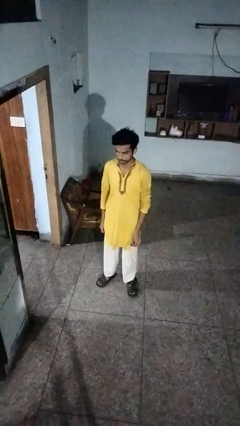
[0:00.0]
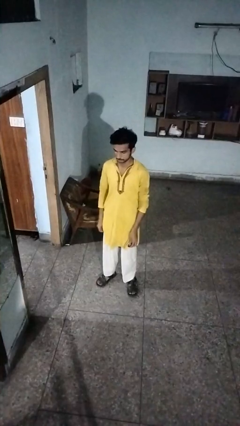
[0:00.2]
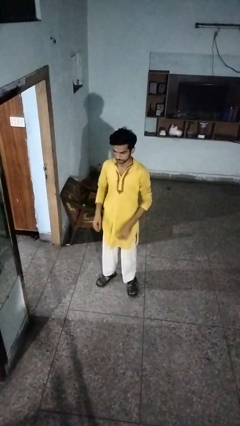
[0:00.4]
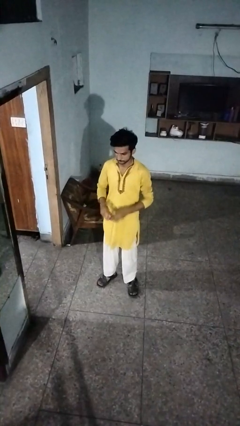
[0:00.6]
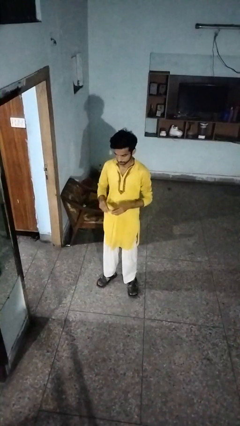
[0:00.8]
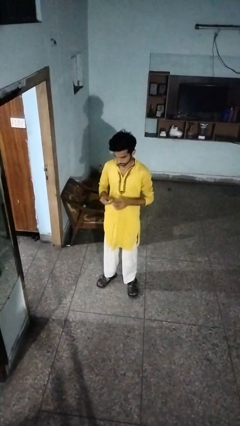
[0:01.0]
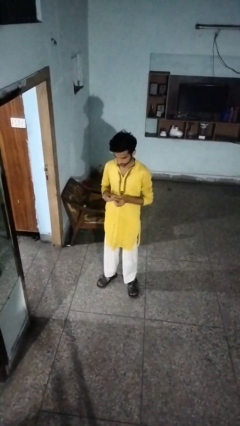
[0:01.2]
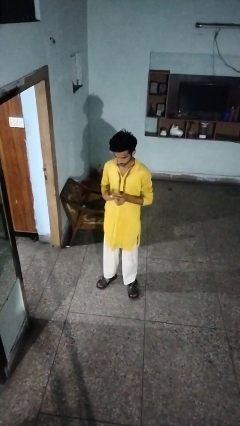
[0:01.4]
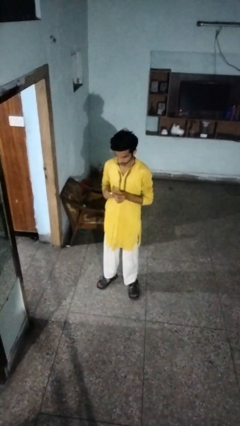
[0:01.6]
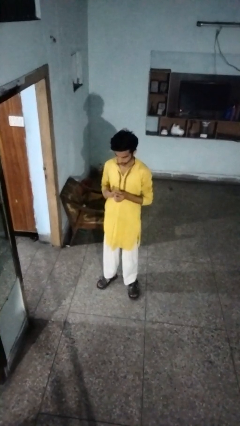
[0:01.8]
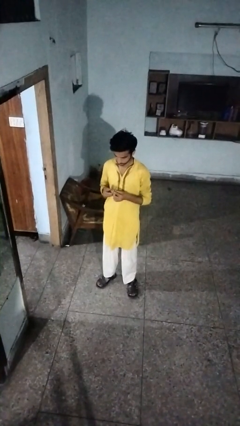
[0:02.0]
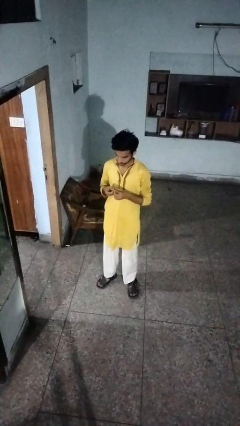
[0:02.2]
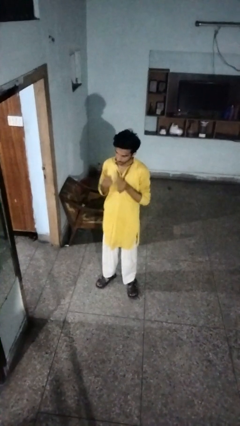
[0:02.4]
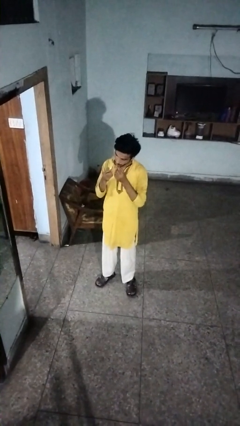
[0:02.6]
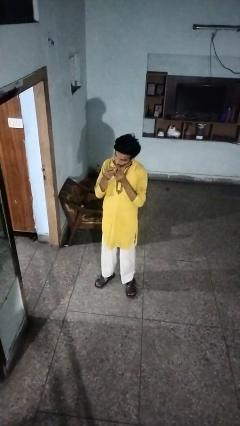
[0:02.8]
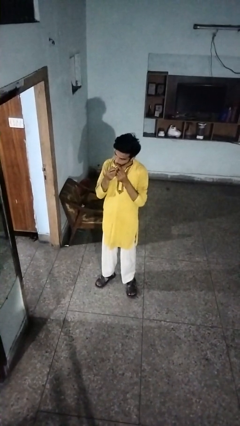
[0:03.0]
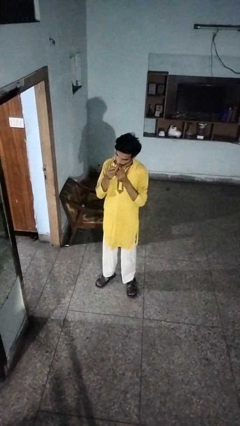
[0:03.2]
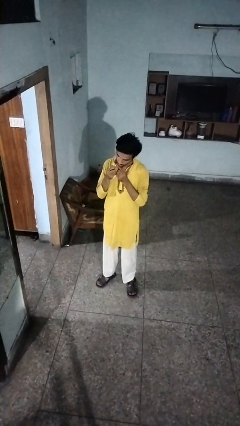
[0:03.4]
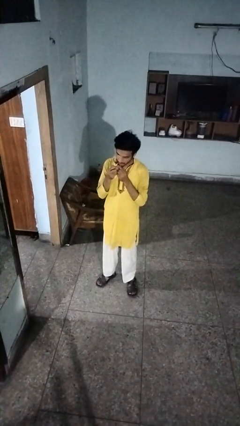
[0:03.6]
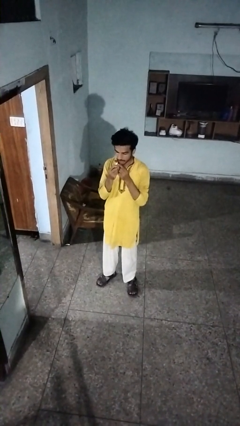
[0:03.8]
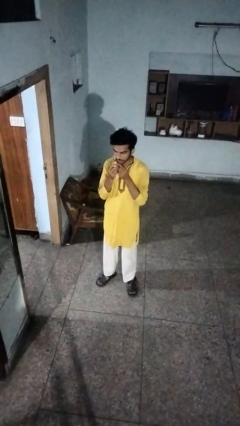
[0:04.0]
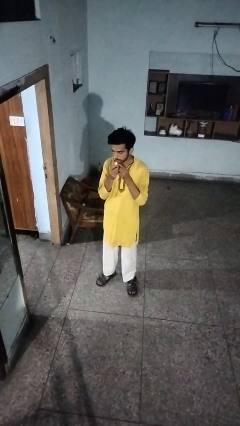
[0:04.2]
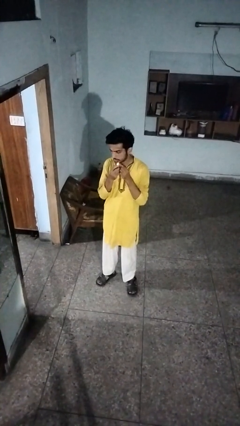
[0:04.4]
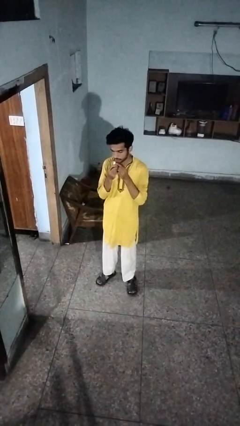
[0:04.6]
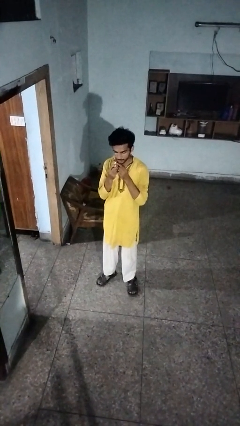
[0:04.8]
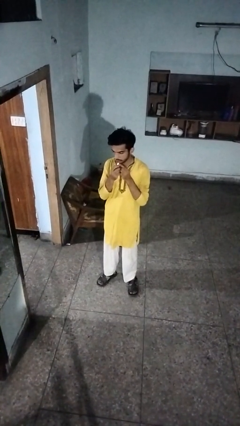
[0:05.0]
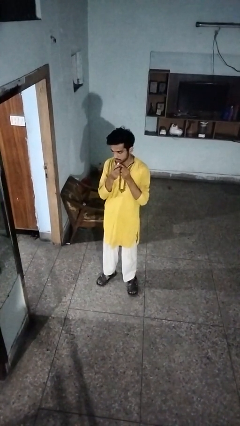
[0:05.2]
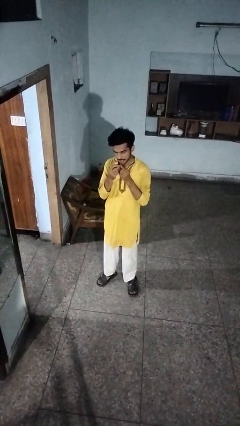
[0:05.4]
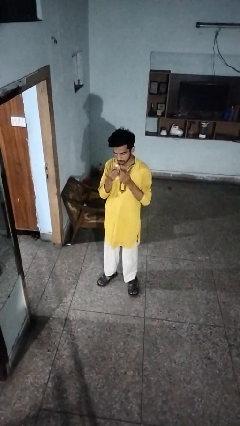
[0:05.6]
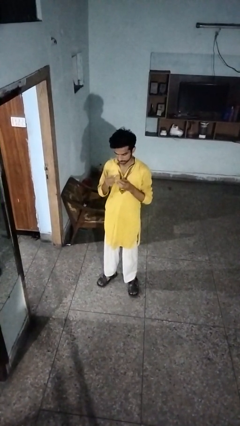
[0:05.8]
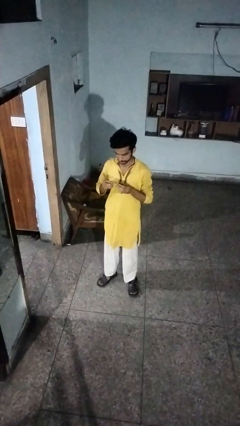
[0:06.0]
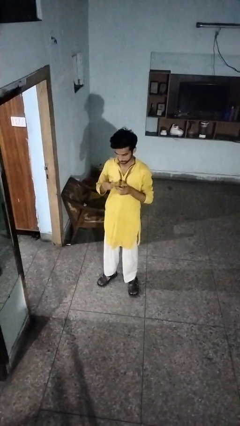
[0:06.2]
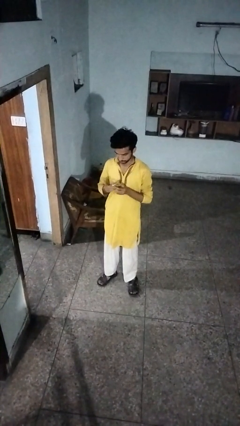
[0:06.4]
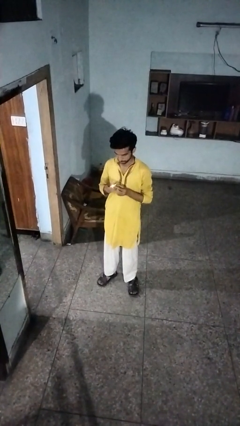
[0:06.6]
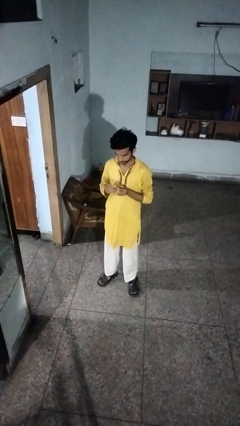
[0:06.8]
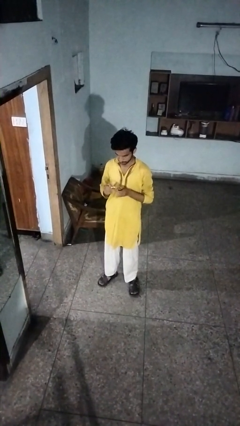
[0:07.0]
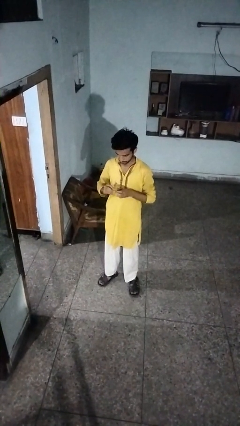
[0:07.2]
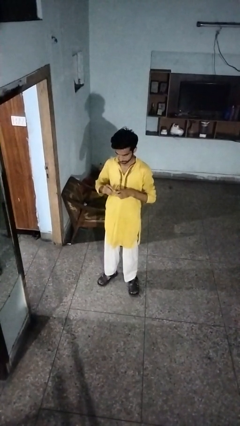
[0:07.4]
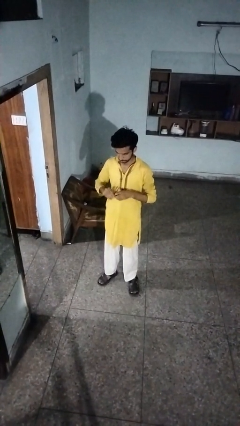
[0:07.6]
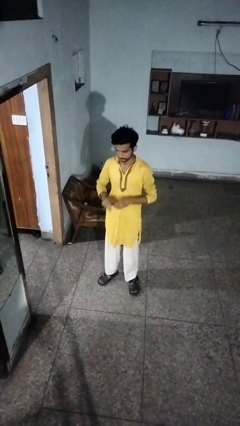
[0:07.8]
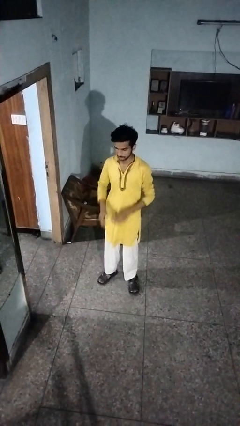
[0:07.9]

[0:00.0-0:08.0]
person applies lip makeup

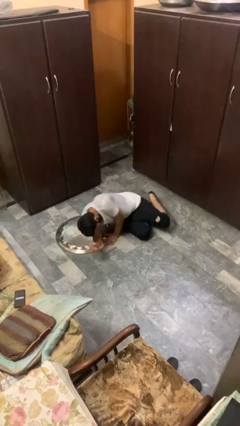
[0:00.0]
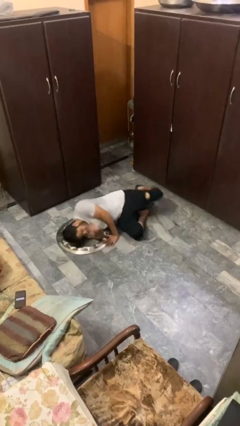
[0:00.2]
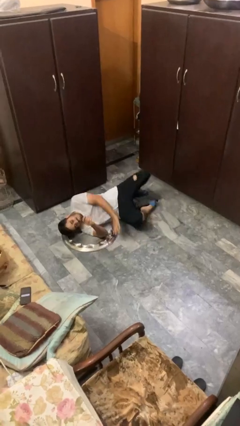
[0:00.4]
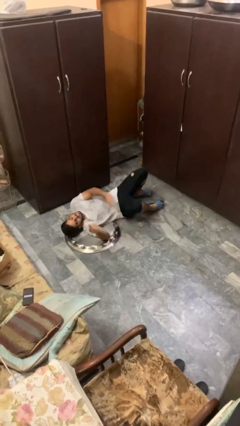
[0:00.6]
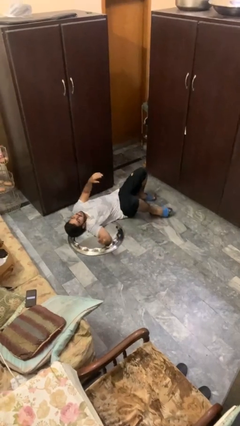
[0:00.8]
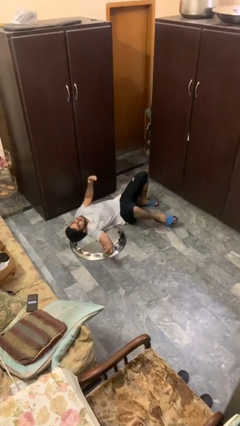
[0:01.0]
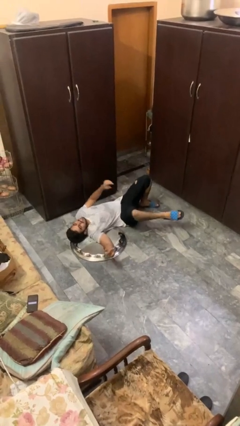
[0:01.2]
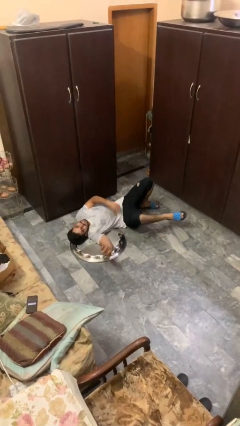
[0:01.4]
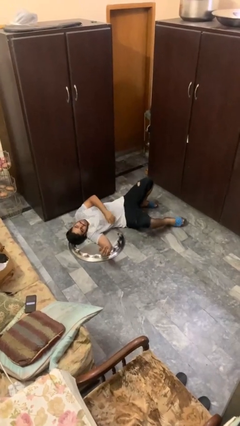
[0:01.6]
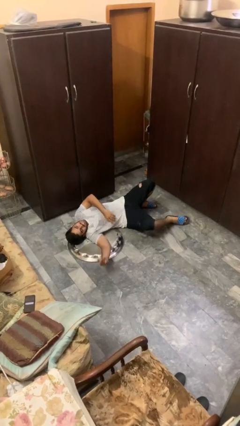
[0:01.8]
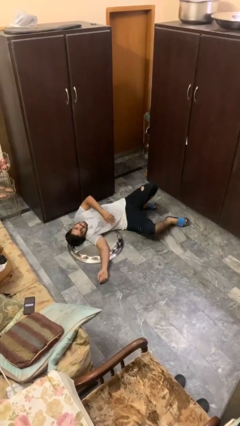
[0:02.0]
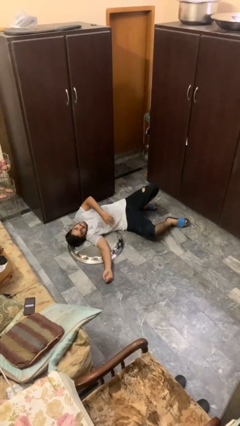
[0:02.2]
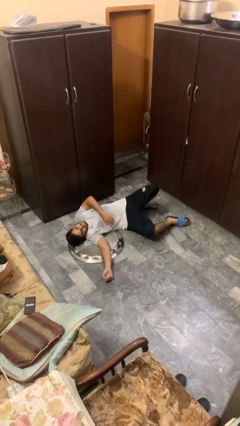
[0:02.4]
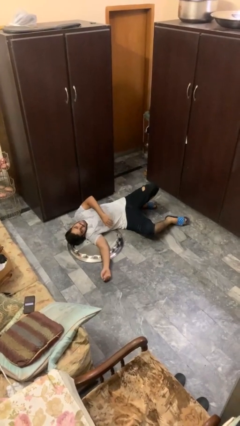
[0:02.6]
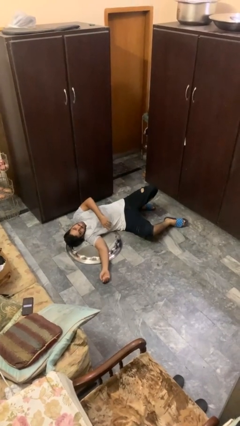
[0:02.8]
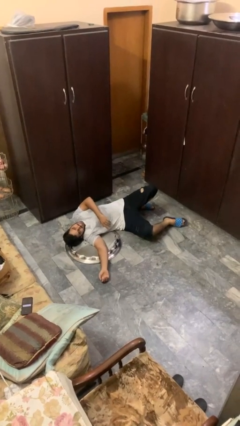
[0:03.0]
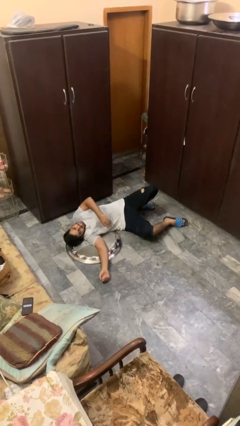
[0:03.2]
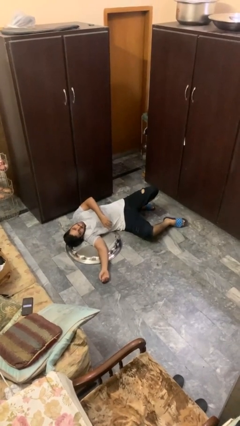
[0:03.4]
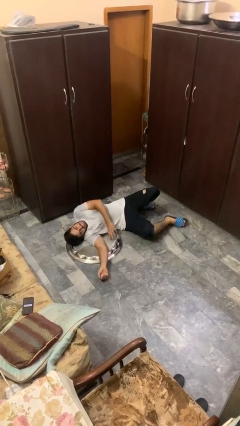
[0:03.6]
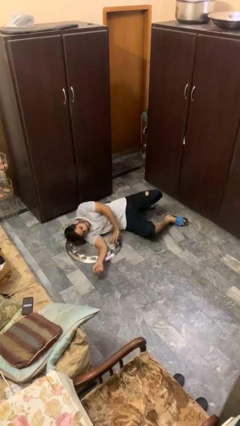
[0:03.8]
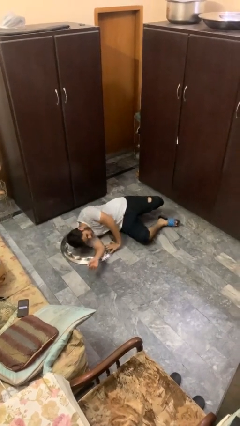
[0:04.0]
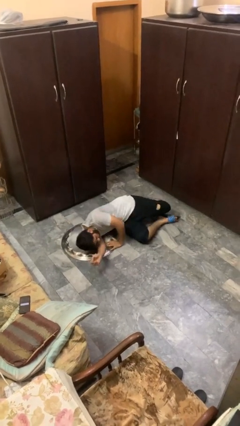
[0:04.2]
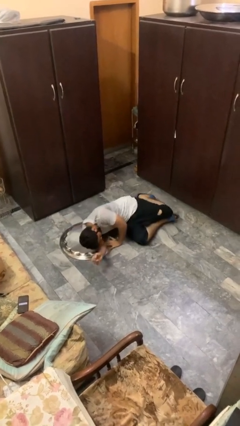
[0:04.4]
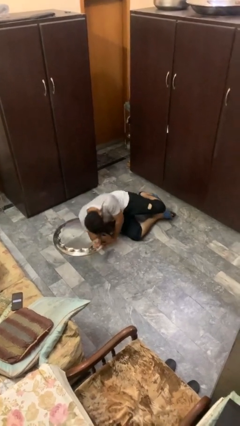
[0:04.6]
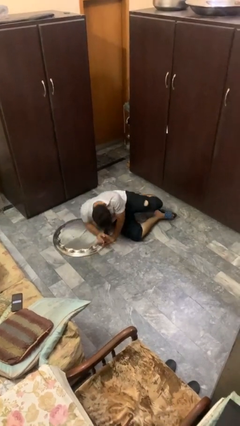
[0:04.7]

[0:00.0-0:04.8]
person lies down on floor

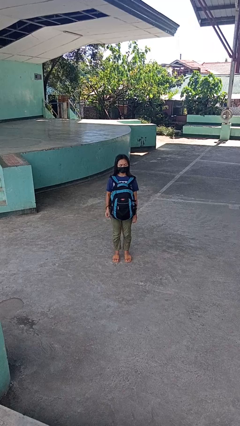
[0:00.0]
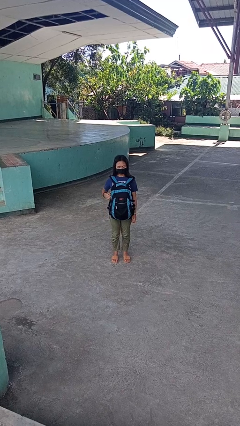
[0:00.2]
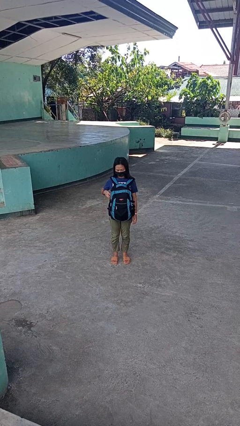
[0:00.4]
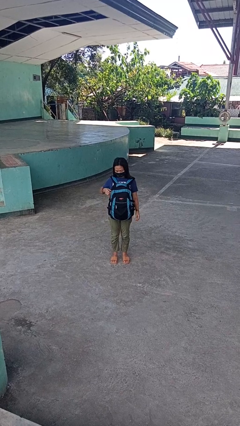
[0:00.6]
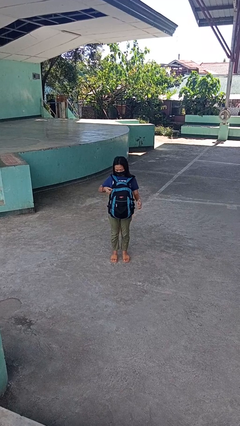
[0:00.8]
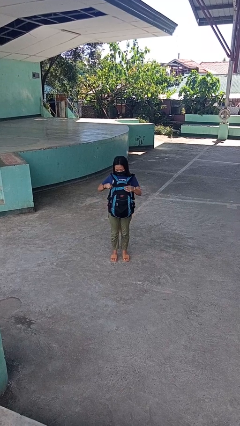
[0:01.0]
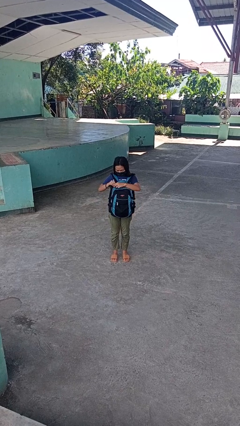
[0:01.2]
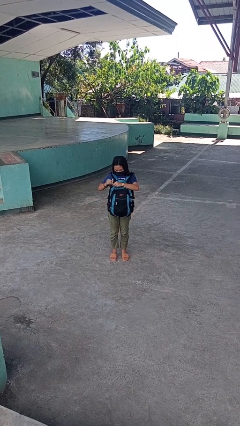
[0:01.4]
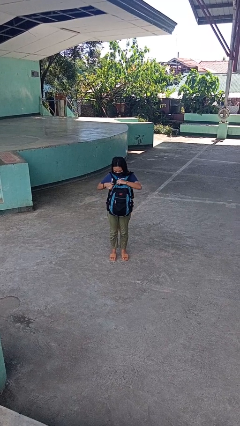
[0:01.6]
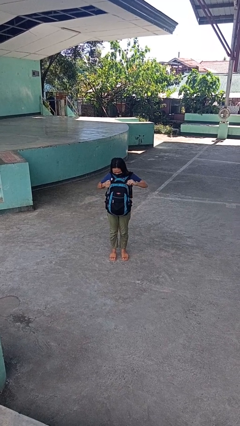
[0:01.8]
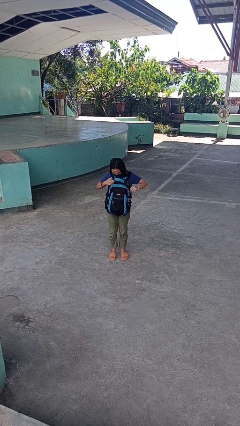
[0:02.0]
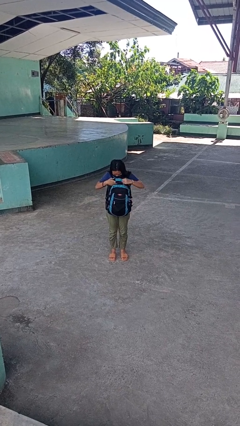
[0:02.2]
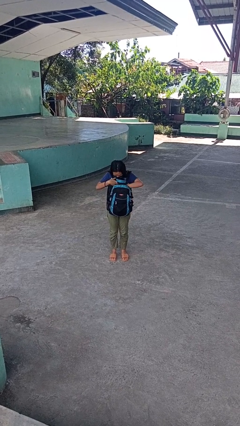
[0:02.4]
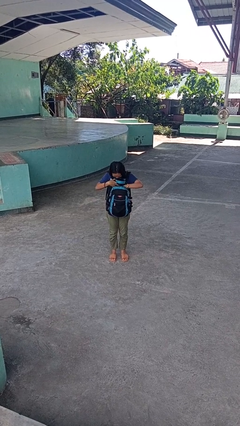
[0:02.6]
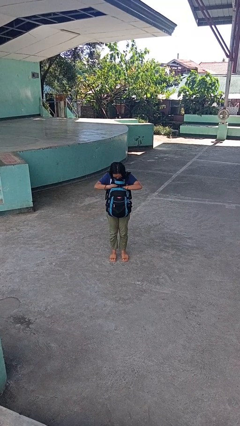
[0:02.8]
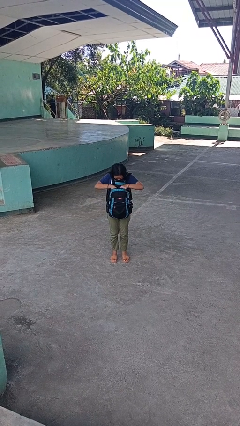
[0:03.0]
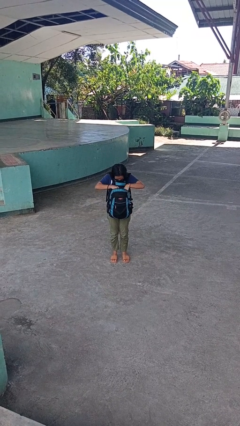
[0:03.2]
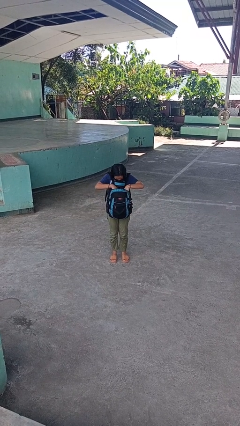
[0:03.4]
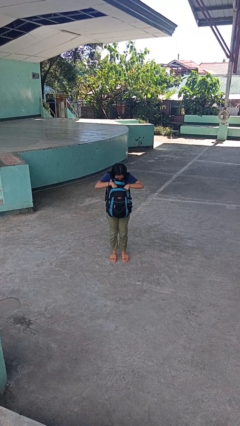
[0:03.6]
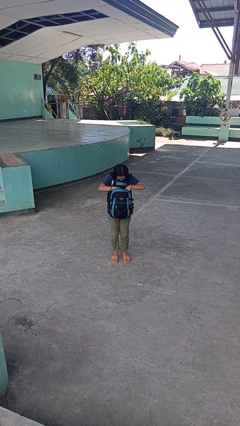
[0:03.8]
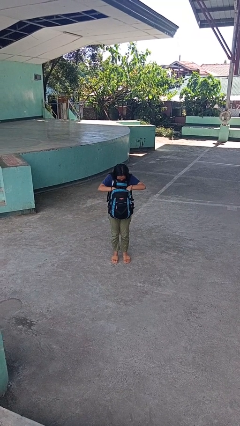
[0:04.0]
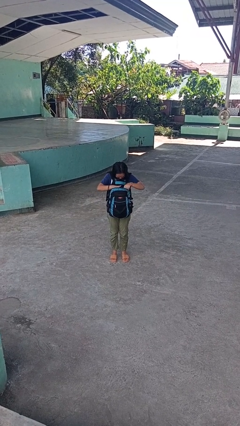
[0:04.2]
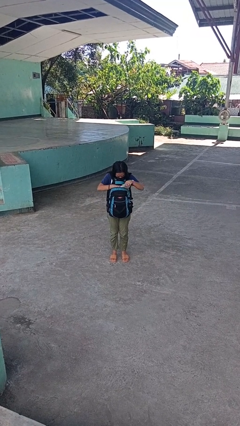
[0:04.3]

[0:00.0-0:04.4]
person searches in backpack

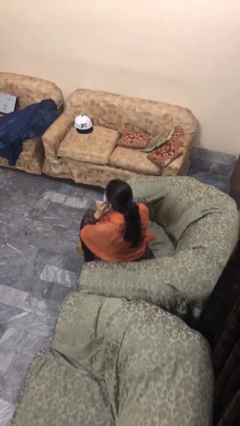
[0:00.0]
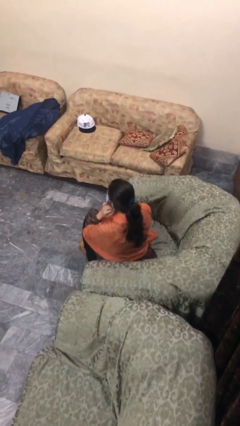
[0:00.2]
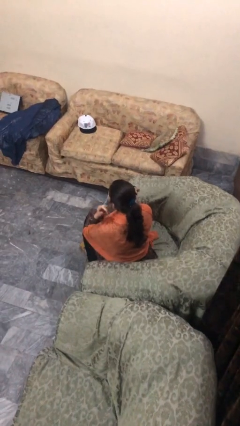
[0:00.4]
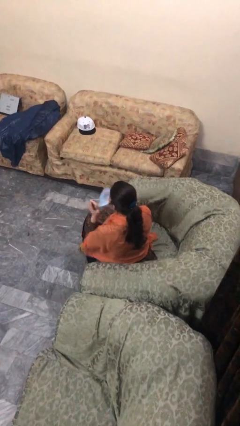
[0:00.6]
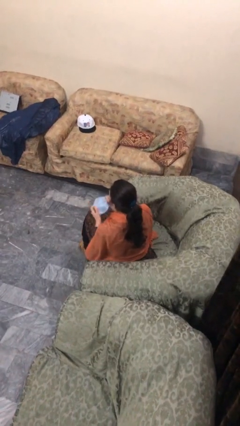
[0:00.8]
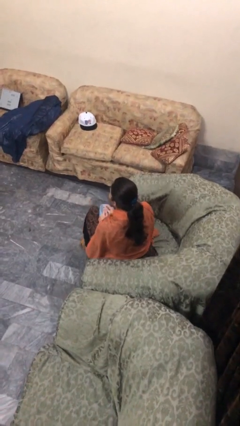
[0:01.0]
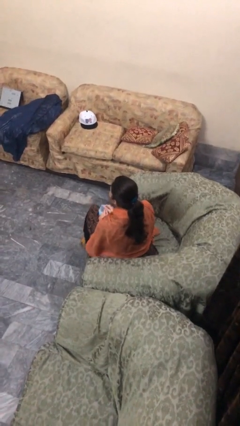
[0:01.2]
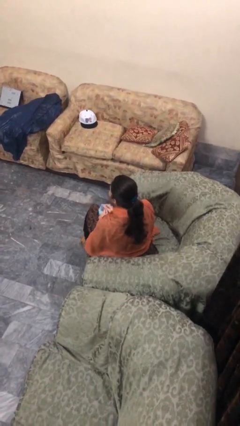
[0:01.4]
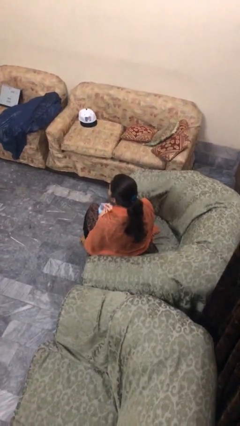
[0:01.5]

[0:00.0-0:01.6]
person takes off facemask
